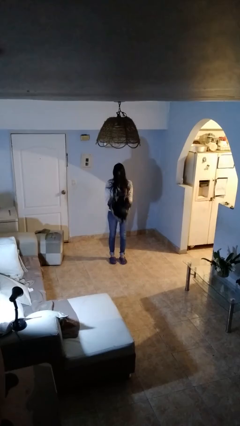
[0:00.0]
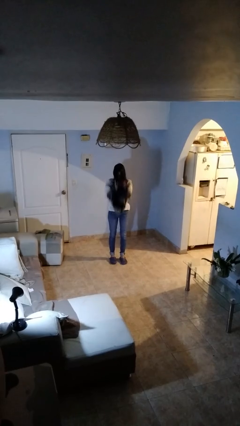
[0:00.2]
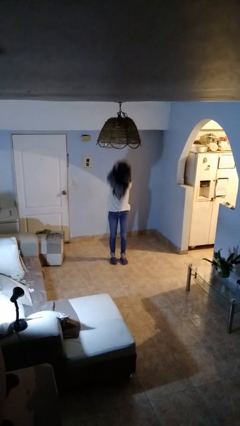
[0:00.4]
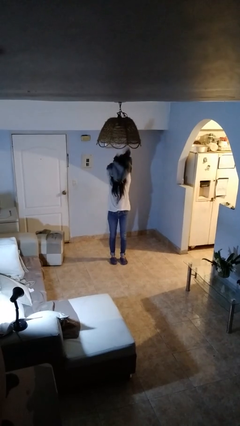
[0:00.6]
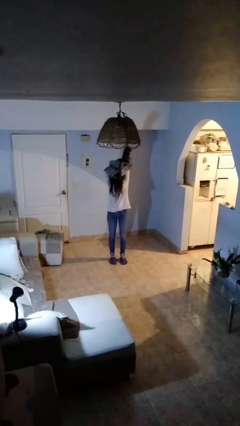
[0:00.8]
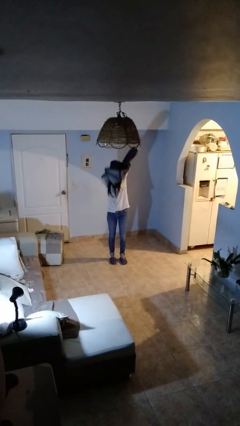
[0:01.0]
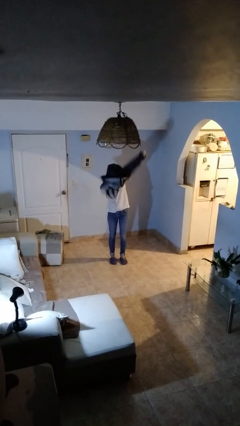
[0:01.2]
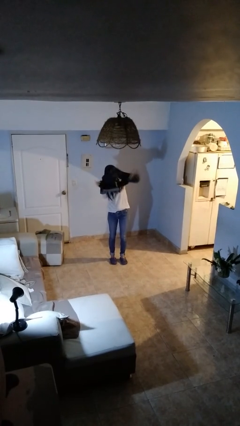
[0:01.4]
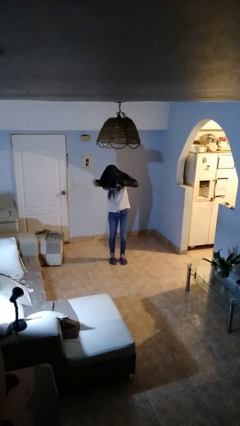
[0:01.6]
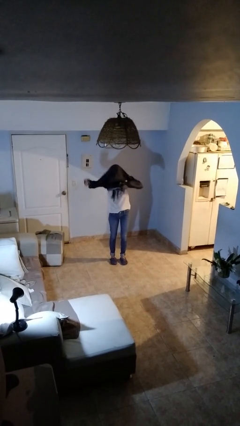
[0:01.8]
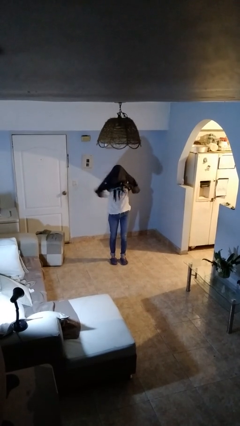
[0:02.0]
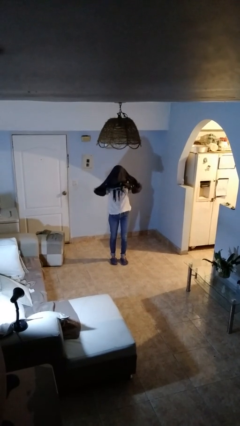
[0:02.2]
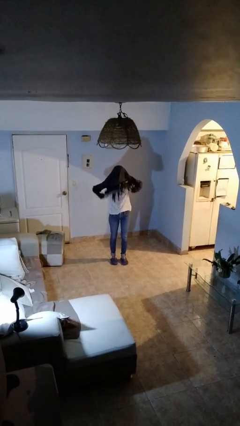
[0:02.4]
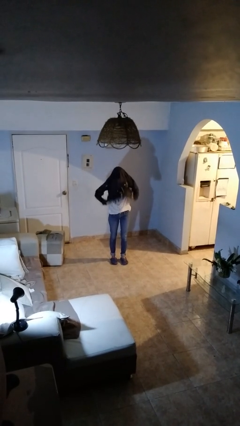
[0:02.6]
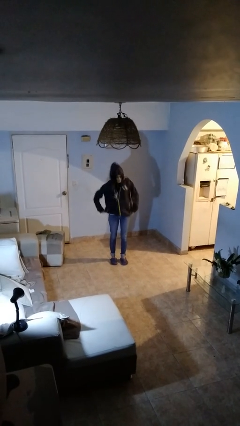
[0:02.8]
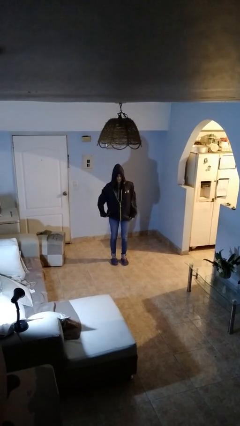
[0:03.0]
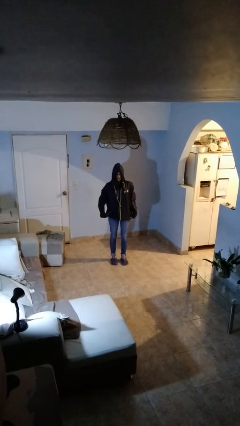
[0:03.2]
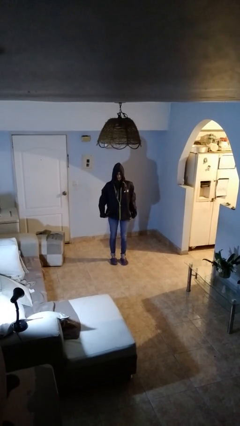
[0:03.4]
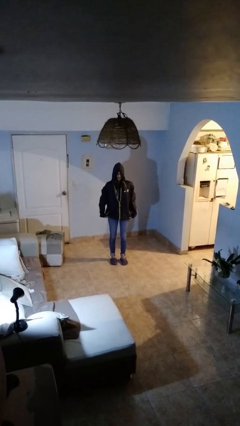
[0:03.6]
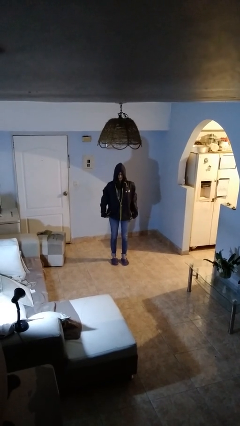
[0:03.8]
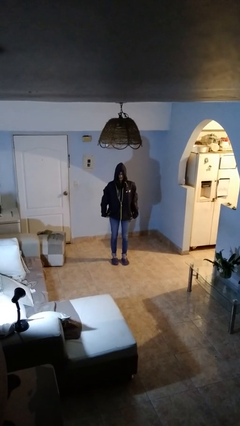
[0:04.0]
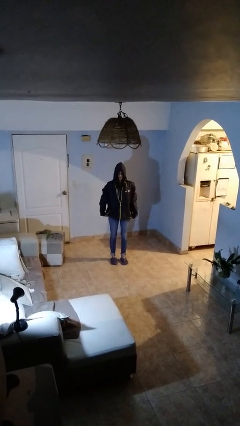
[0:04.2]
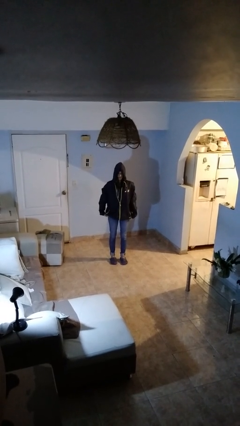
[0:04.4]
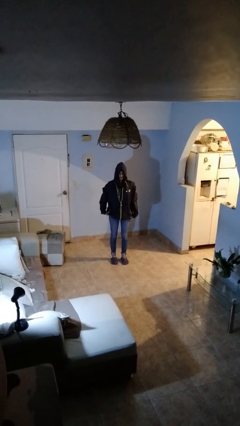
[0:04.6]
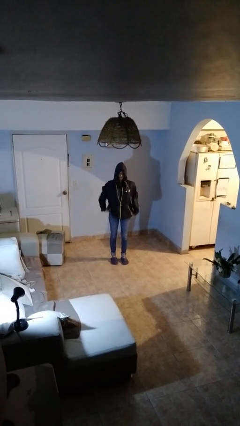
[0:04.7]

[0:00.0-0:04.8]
person puts on hoodie

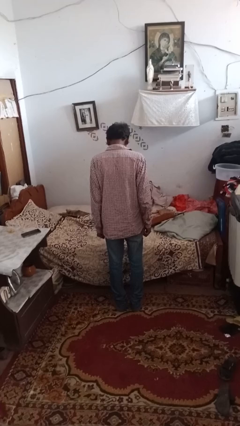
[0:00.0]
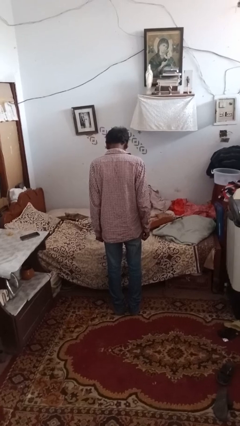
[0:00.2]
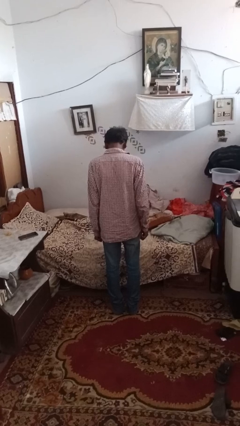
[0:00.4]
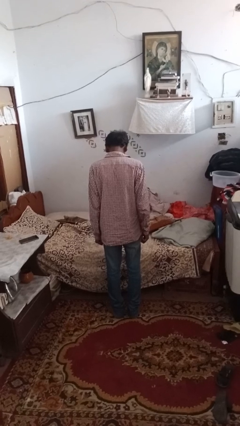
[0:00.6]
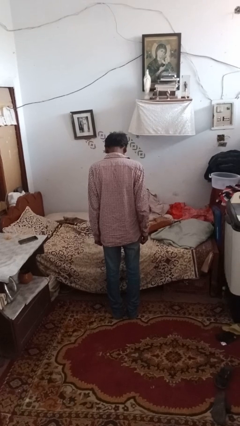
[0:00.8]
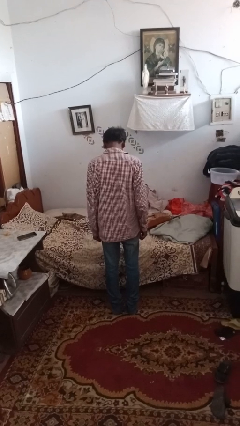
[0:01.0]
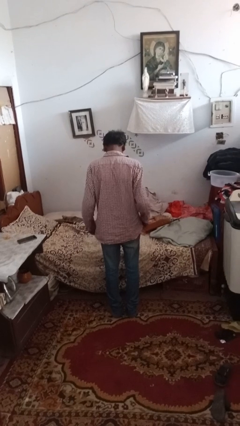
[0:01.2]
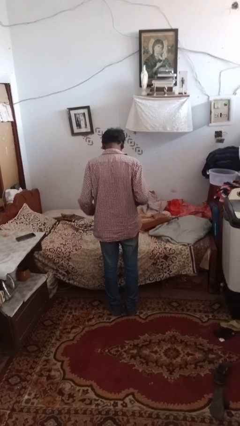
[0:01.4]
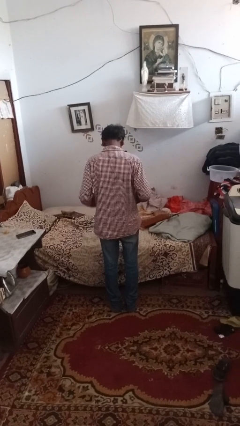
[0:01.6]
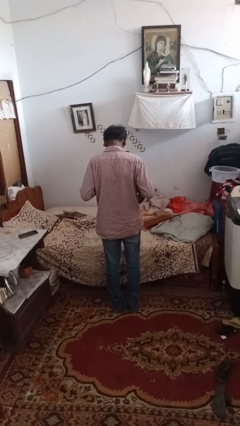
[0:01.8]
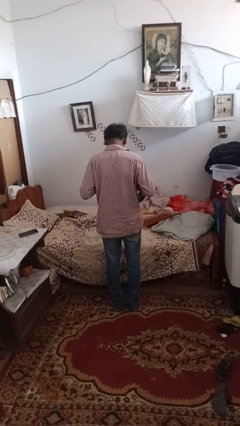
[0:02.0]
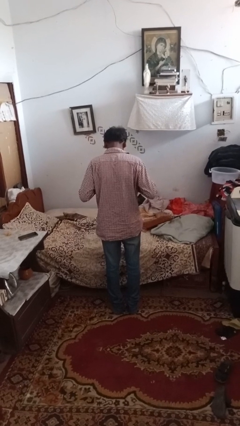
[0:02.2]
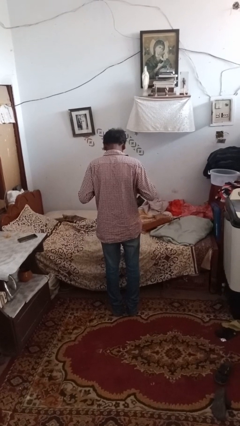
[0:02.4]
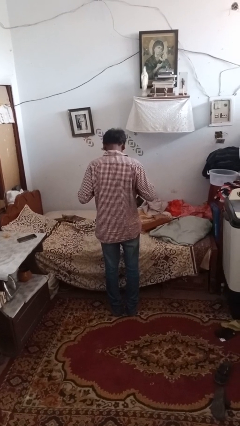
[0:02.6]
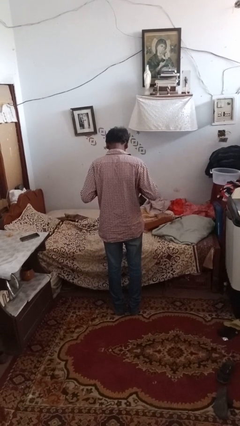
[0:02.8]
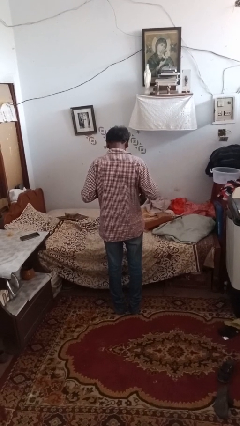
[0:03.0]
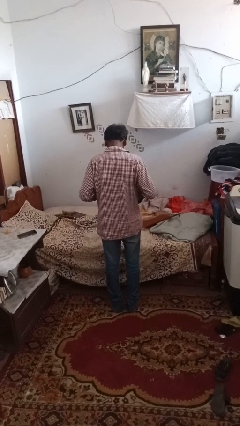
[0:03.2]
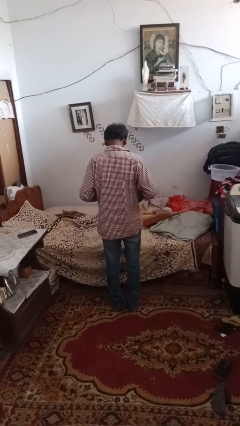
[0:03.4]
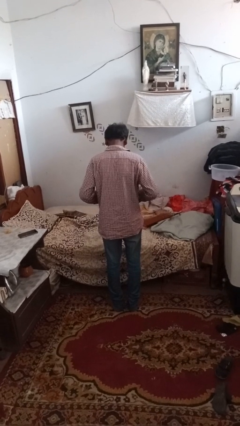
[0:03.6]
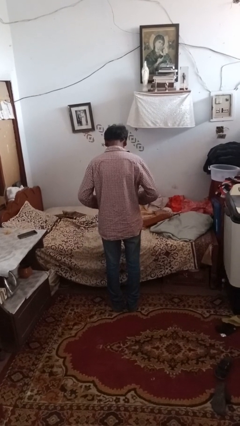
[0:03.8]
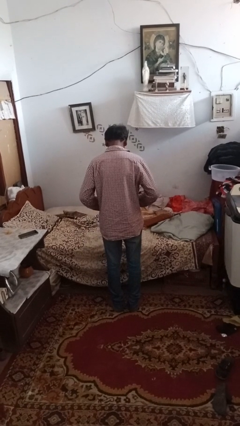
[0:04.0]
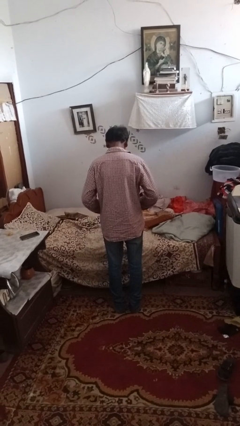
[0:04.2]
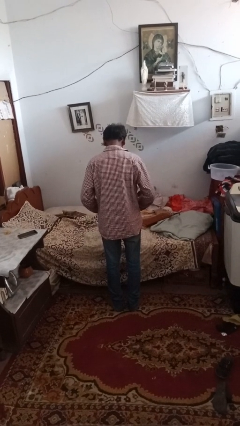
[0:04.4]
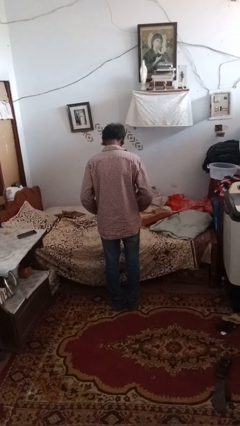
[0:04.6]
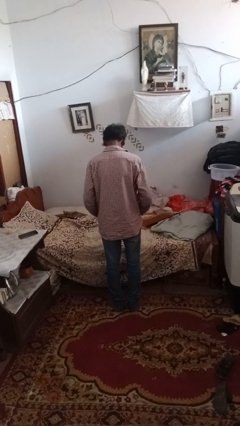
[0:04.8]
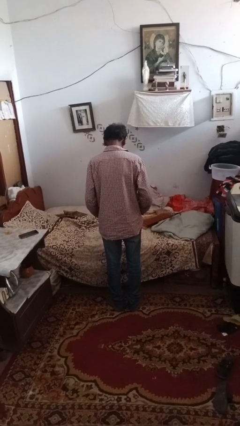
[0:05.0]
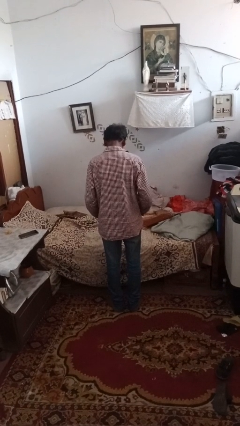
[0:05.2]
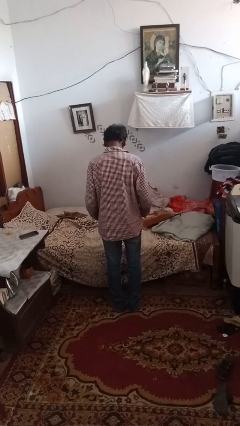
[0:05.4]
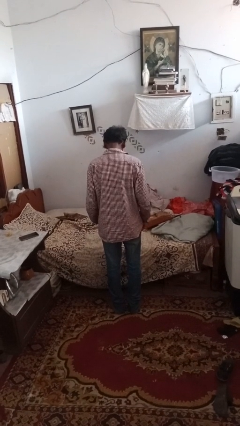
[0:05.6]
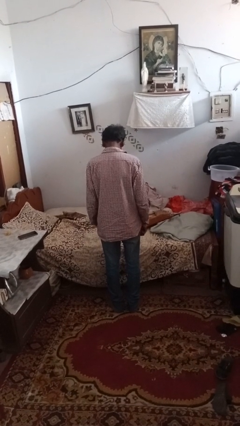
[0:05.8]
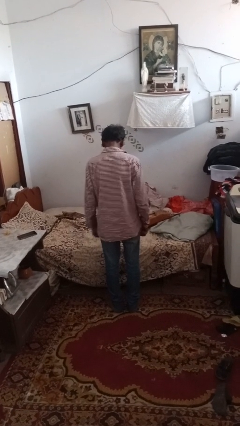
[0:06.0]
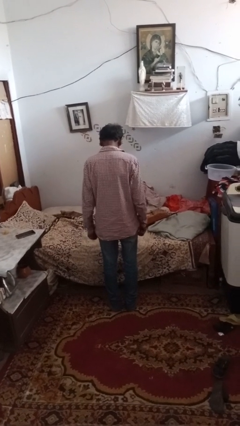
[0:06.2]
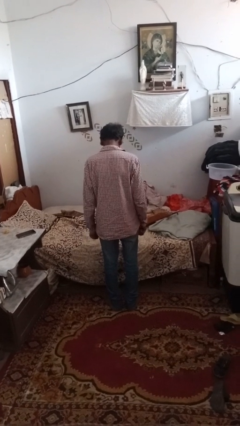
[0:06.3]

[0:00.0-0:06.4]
person buttons shirt

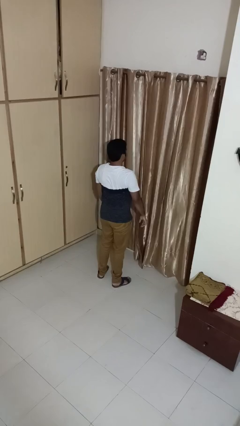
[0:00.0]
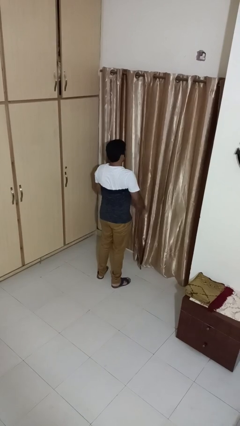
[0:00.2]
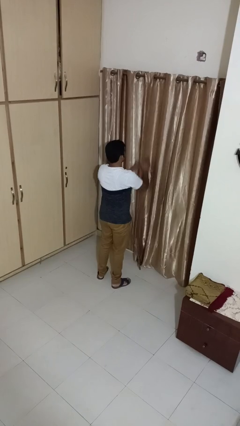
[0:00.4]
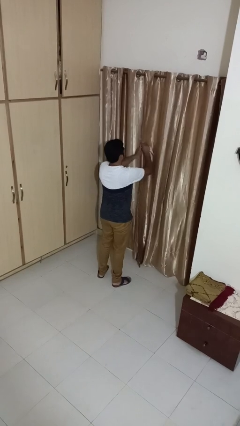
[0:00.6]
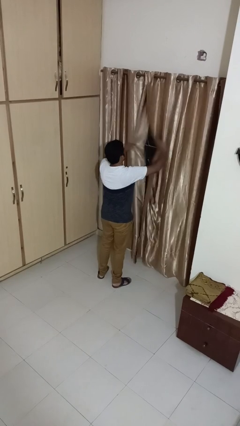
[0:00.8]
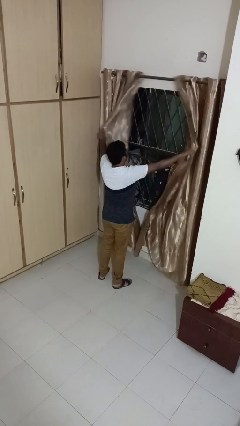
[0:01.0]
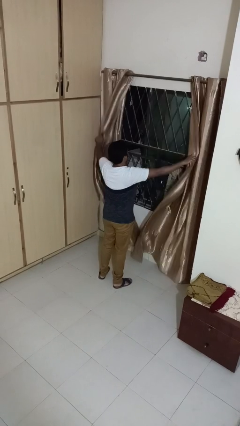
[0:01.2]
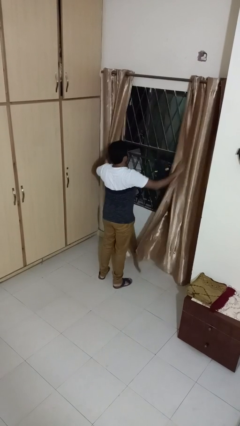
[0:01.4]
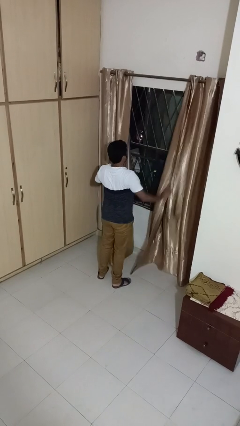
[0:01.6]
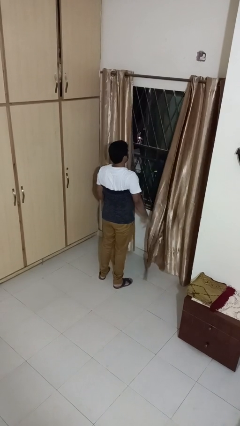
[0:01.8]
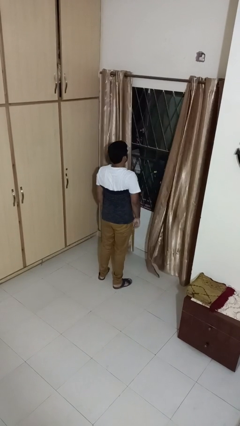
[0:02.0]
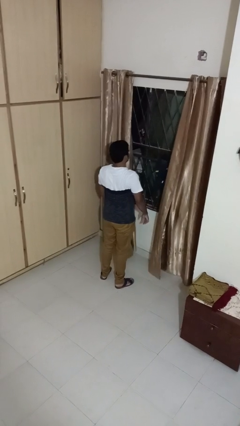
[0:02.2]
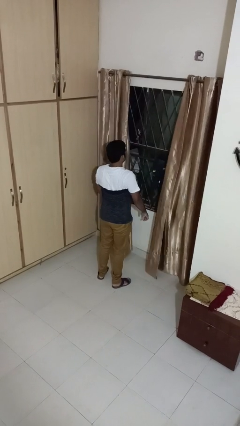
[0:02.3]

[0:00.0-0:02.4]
person opens curtains

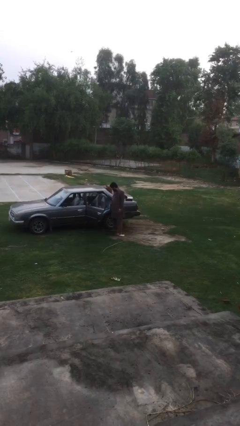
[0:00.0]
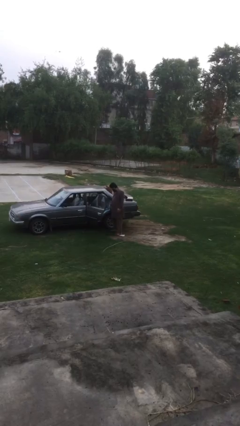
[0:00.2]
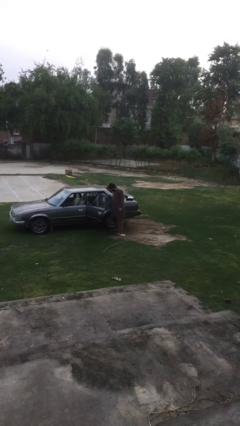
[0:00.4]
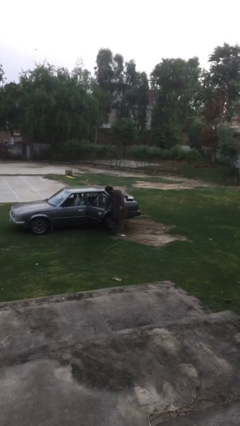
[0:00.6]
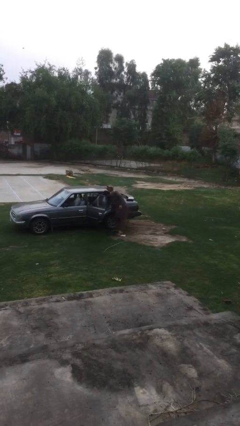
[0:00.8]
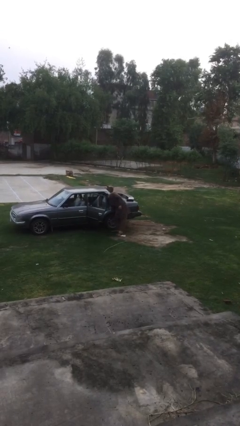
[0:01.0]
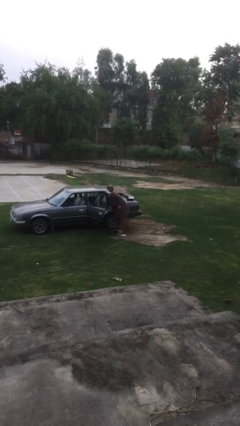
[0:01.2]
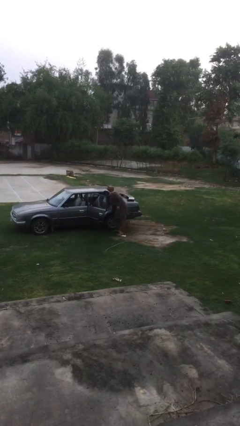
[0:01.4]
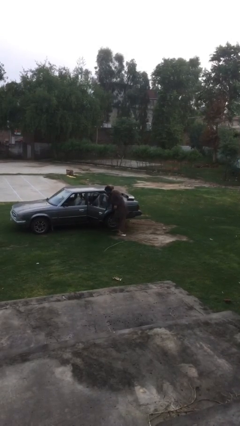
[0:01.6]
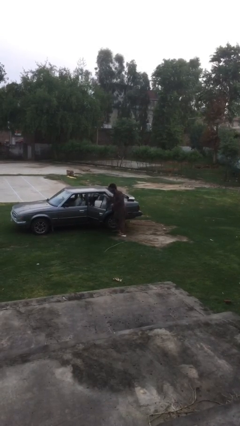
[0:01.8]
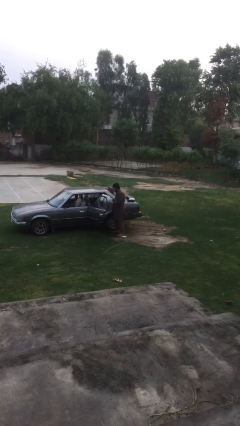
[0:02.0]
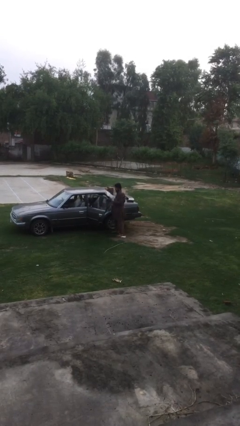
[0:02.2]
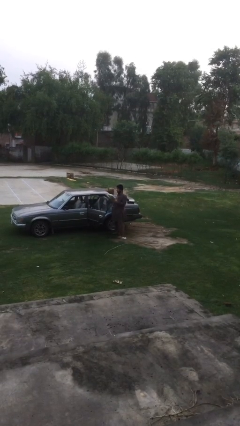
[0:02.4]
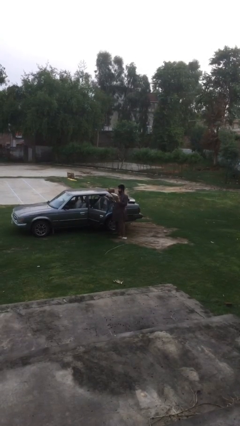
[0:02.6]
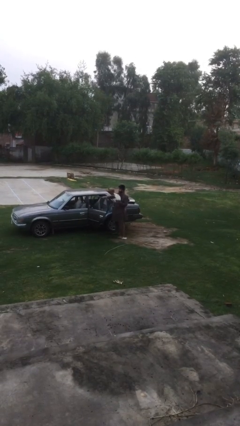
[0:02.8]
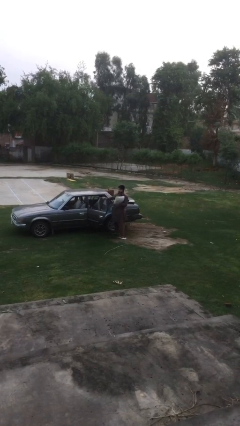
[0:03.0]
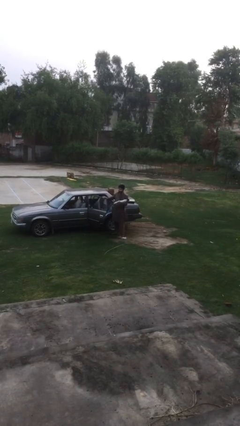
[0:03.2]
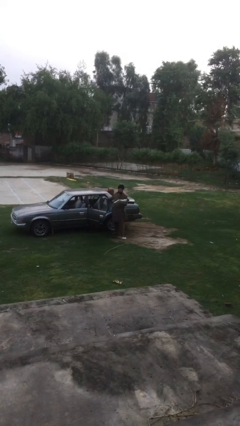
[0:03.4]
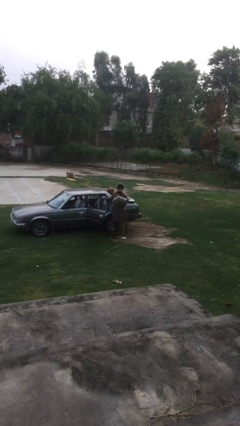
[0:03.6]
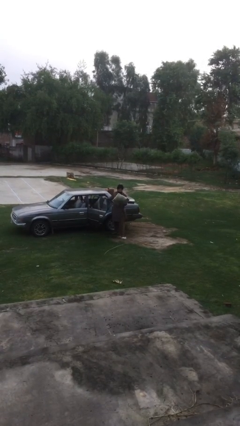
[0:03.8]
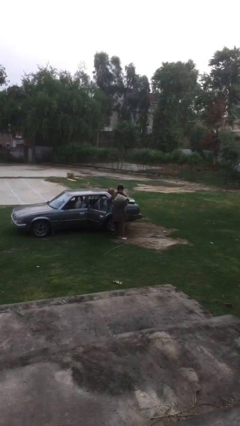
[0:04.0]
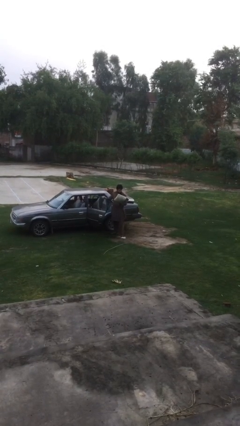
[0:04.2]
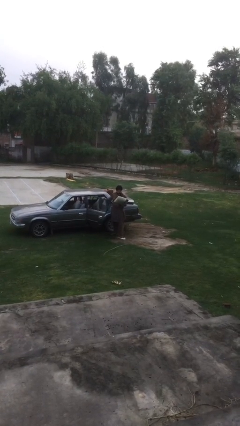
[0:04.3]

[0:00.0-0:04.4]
person unloads car
